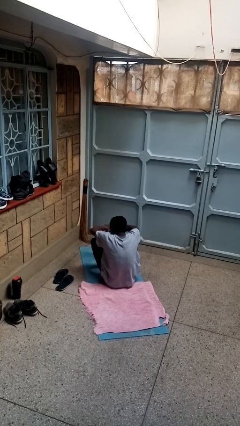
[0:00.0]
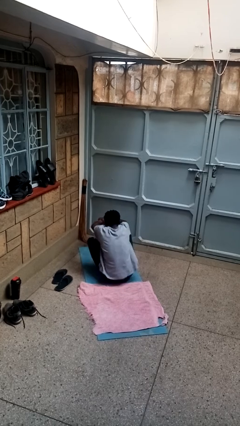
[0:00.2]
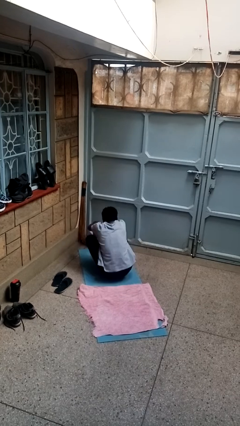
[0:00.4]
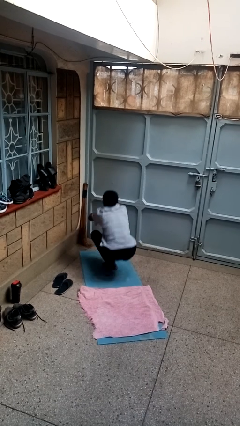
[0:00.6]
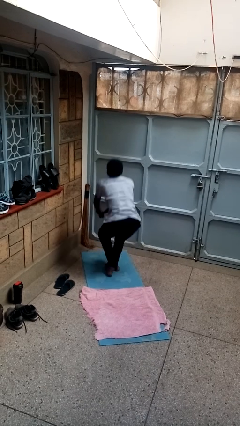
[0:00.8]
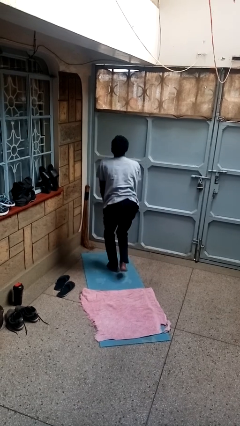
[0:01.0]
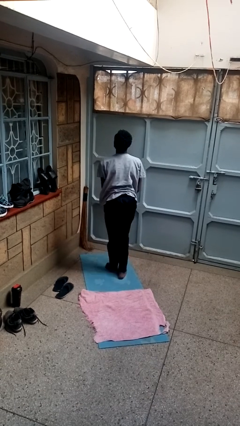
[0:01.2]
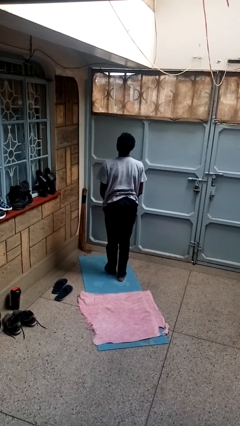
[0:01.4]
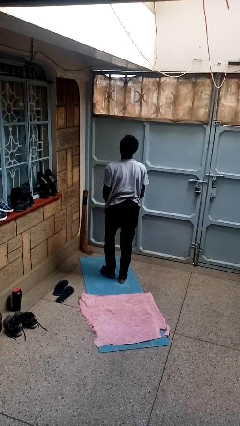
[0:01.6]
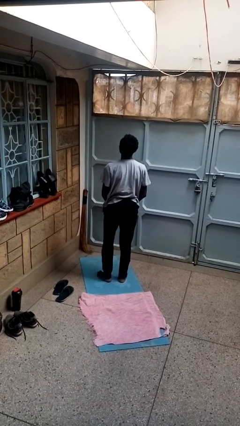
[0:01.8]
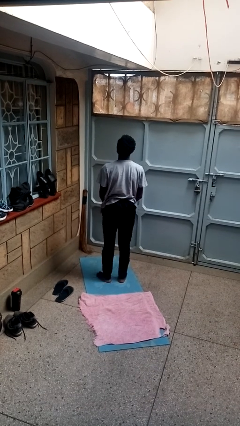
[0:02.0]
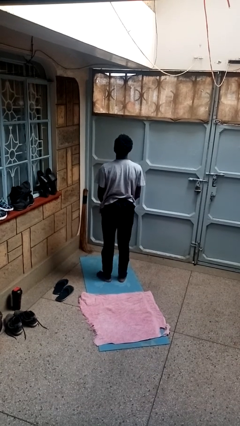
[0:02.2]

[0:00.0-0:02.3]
person stands up from floor

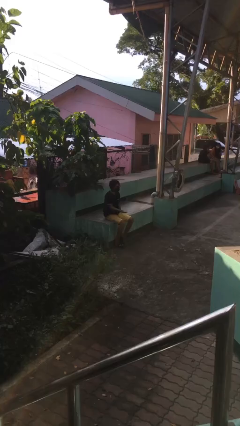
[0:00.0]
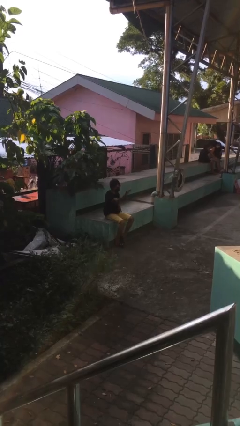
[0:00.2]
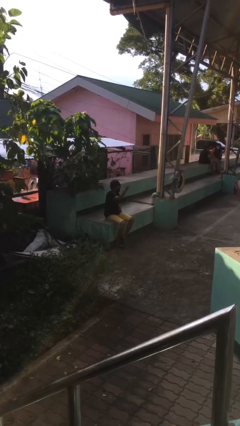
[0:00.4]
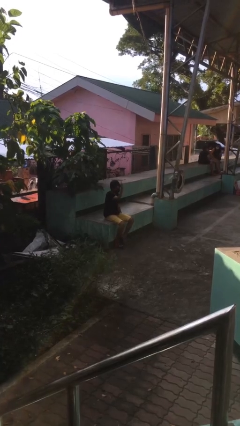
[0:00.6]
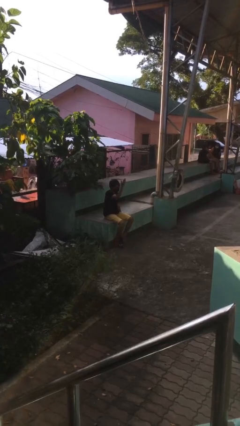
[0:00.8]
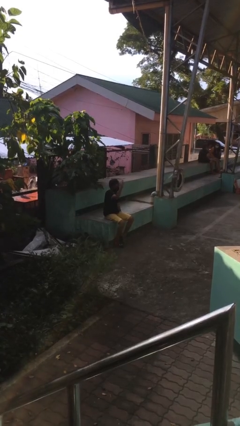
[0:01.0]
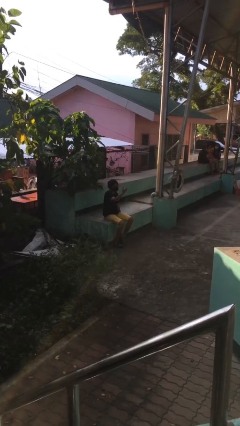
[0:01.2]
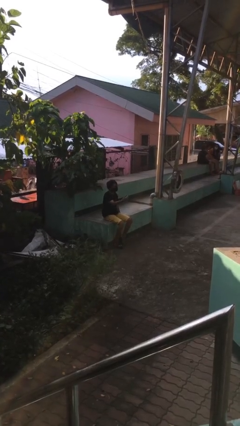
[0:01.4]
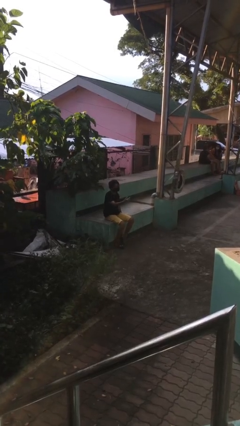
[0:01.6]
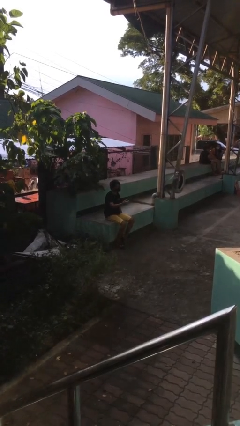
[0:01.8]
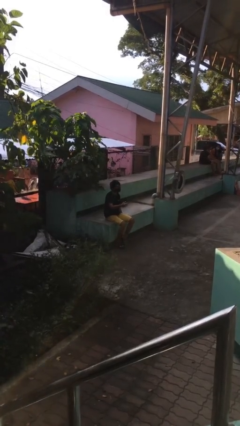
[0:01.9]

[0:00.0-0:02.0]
person gestures come here

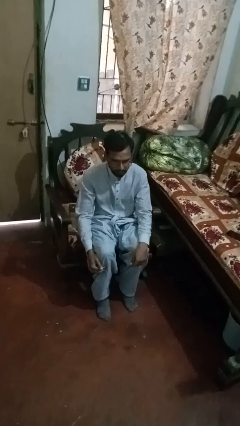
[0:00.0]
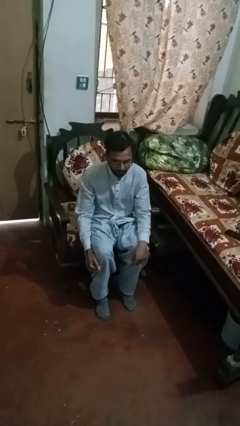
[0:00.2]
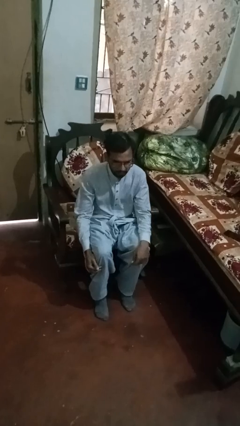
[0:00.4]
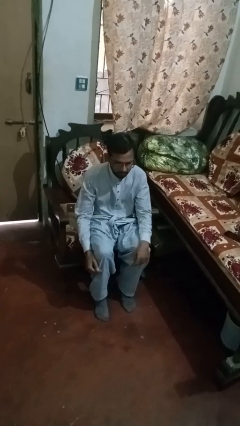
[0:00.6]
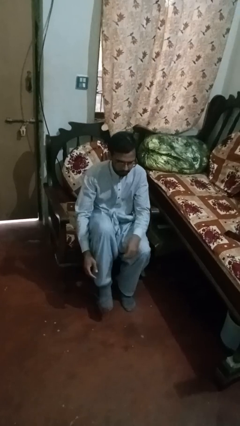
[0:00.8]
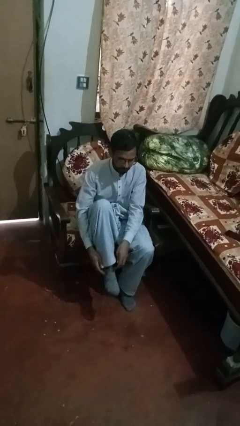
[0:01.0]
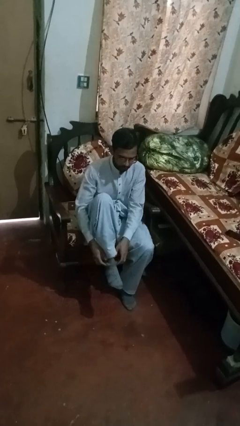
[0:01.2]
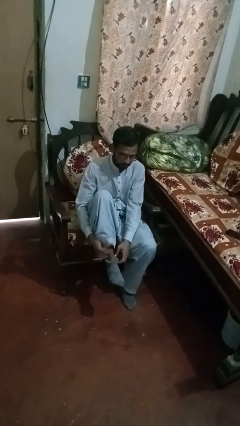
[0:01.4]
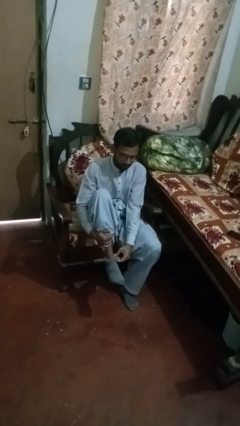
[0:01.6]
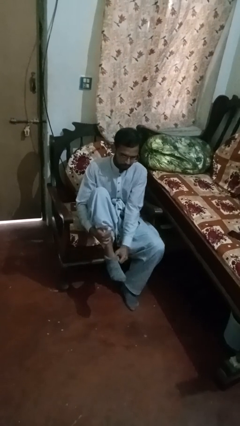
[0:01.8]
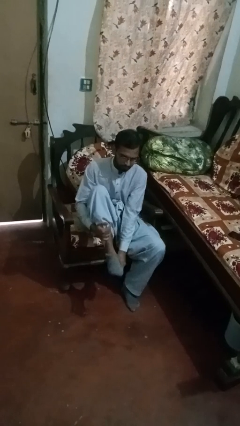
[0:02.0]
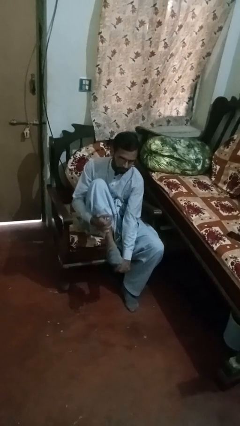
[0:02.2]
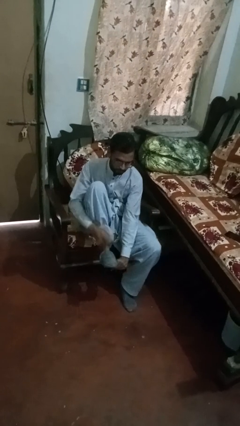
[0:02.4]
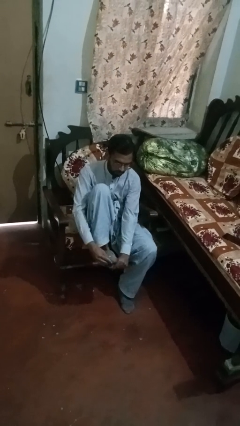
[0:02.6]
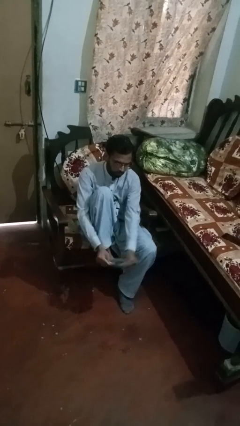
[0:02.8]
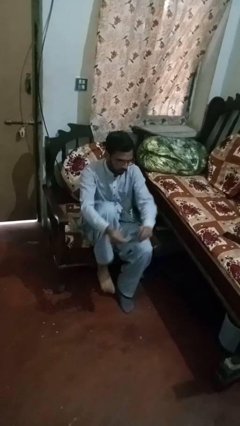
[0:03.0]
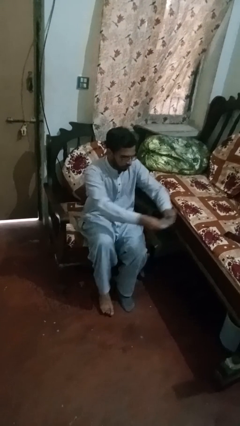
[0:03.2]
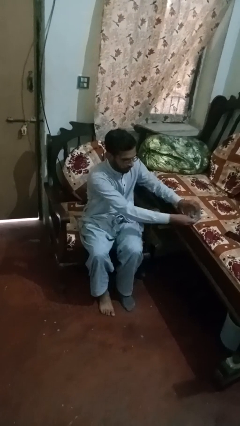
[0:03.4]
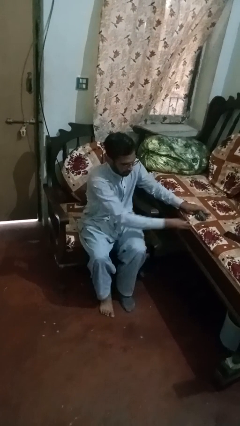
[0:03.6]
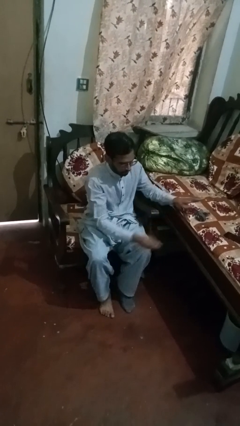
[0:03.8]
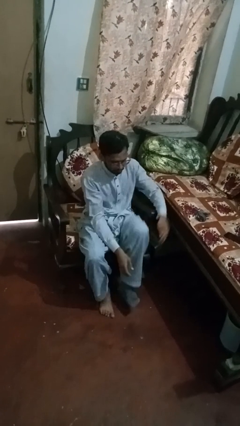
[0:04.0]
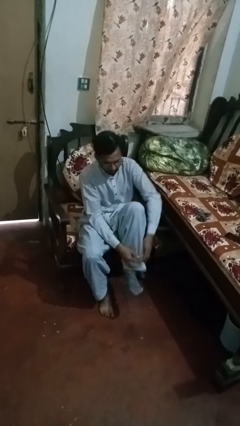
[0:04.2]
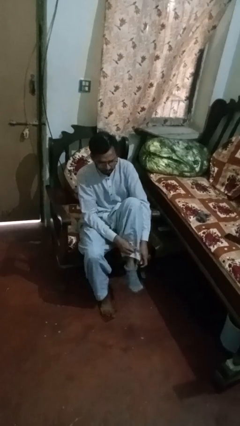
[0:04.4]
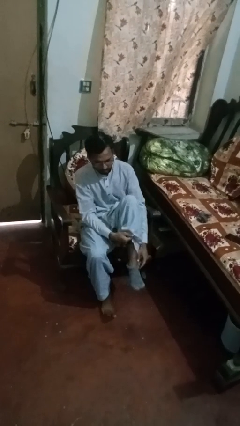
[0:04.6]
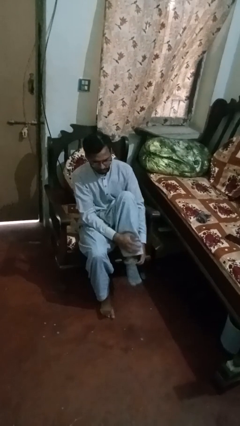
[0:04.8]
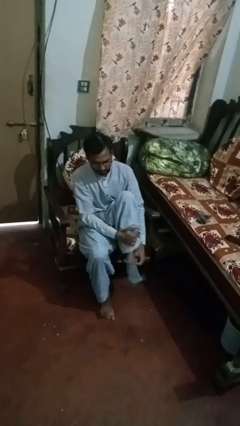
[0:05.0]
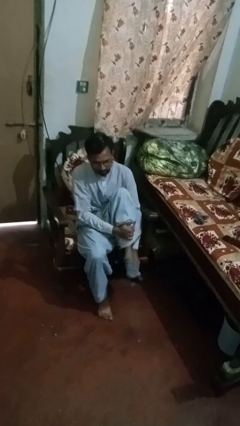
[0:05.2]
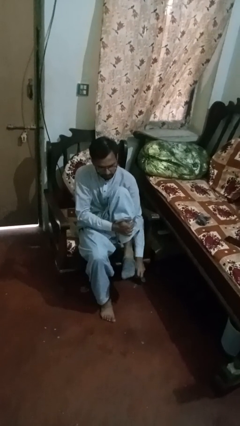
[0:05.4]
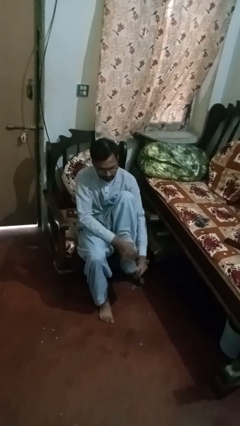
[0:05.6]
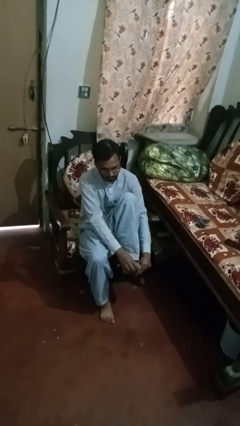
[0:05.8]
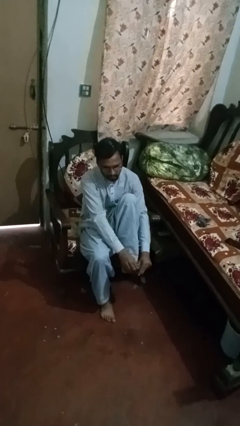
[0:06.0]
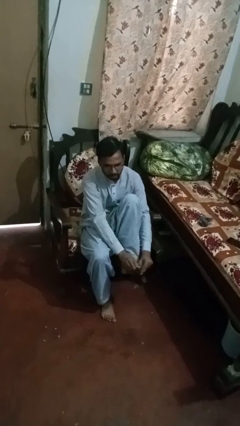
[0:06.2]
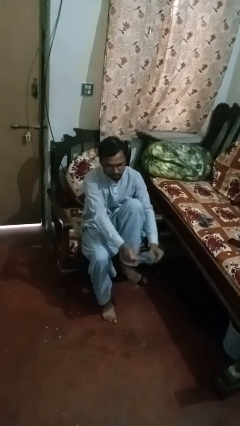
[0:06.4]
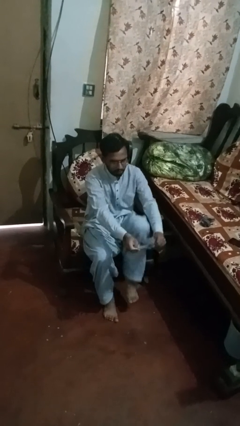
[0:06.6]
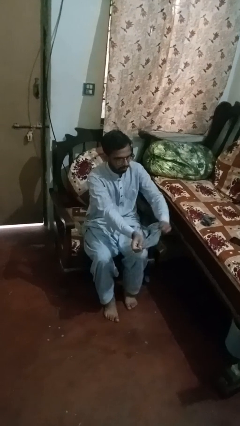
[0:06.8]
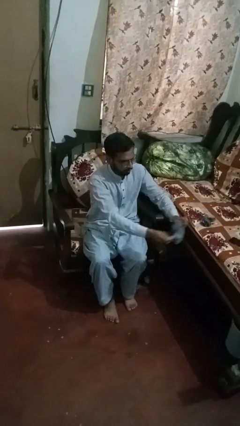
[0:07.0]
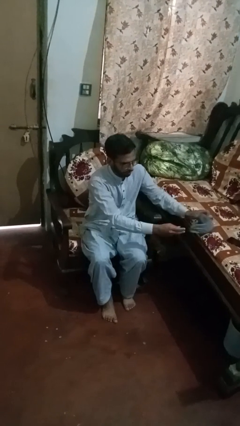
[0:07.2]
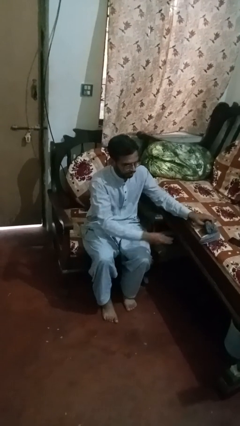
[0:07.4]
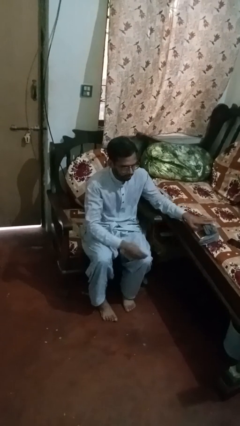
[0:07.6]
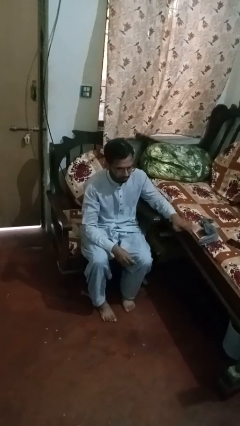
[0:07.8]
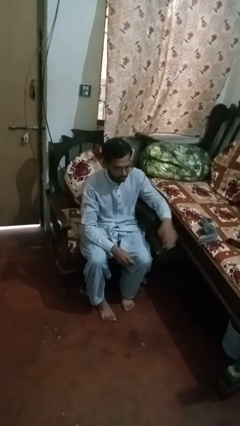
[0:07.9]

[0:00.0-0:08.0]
person takes off socks

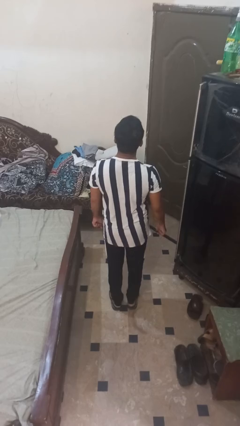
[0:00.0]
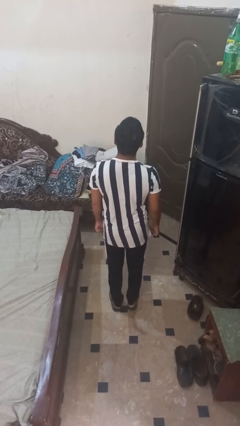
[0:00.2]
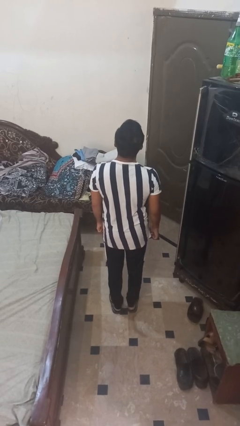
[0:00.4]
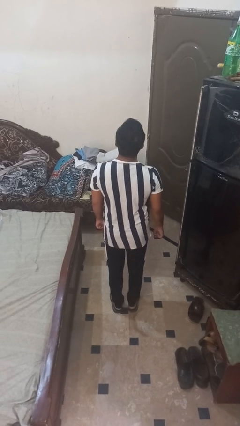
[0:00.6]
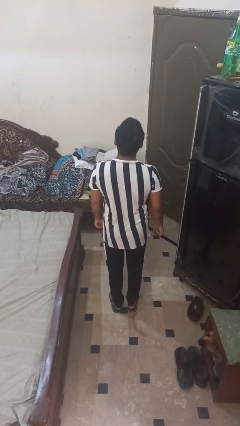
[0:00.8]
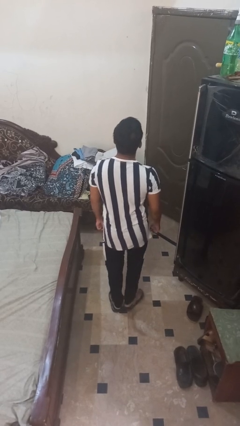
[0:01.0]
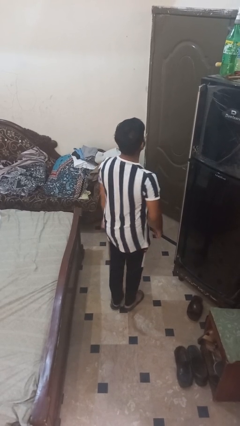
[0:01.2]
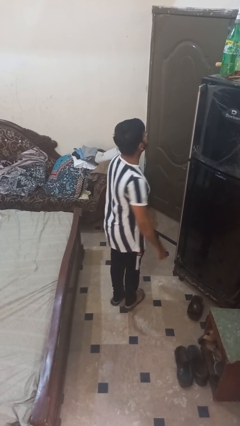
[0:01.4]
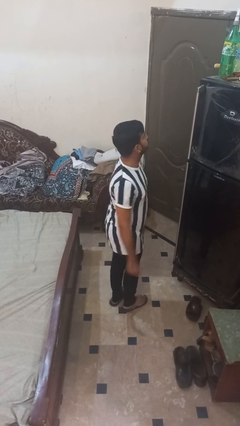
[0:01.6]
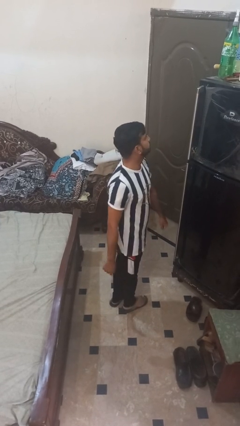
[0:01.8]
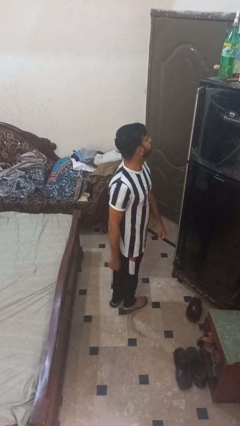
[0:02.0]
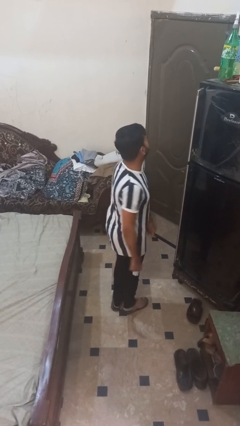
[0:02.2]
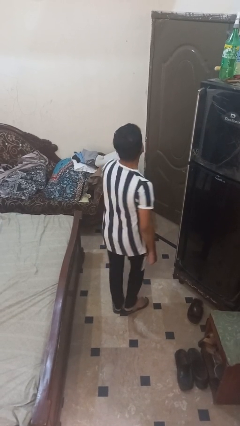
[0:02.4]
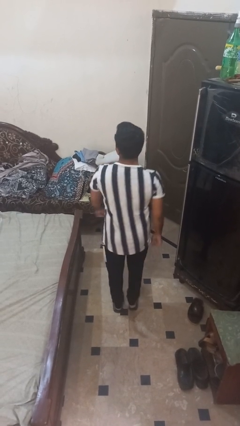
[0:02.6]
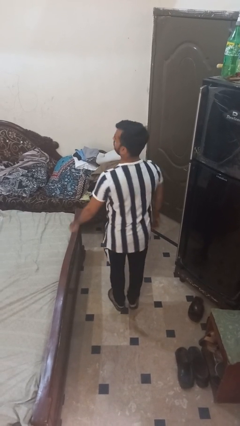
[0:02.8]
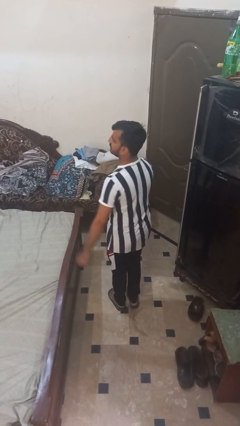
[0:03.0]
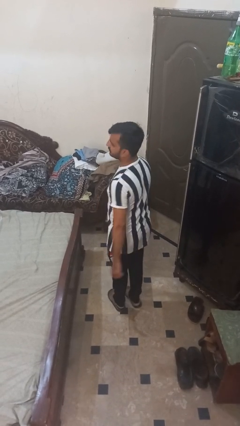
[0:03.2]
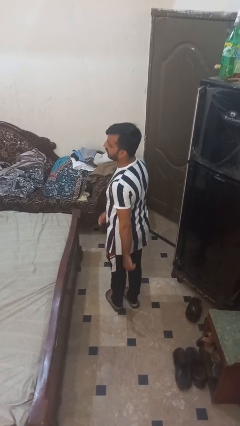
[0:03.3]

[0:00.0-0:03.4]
person twirls

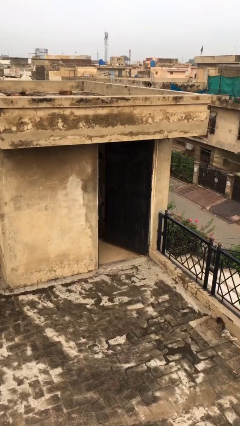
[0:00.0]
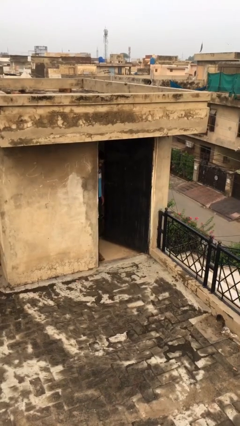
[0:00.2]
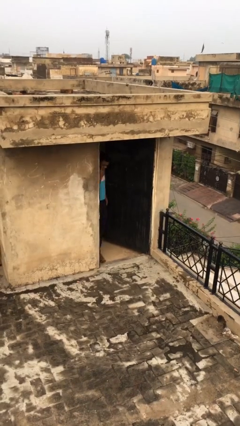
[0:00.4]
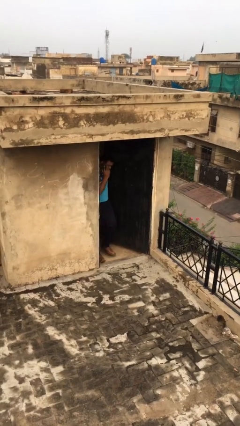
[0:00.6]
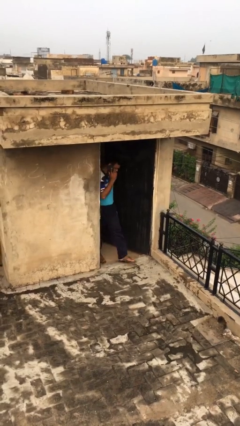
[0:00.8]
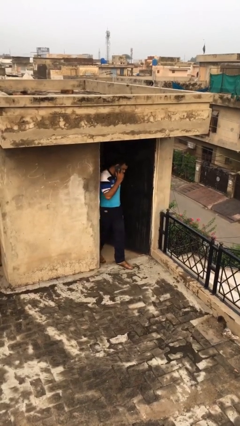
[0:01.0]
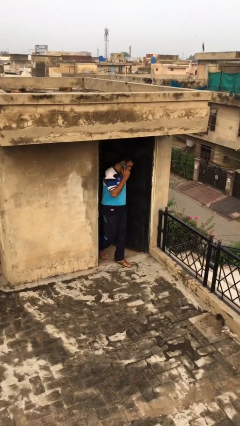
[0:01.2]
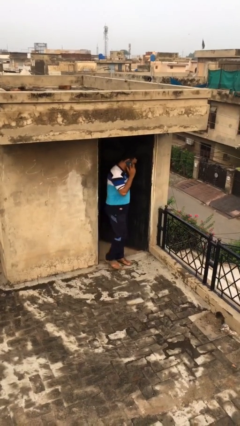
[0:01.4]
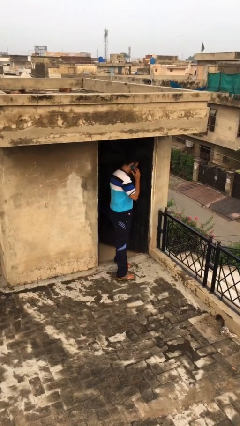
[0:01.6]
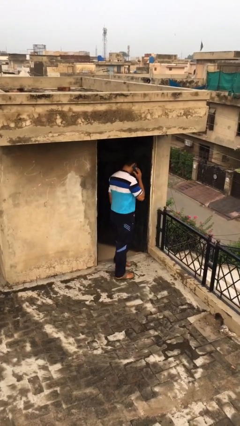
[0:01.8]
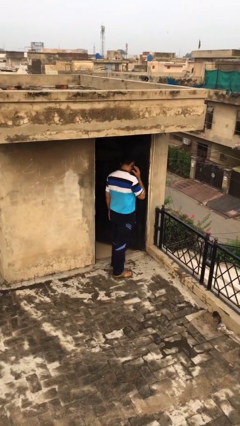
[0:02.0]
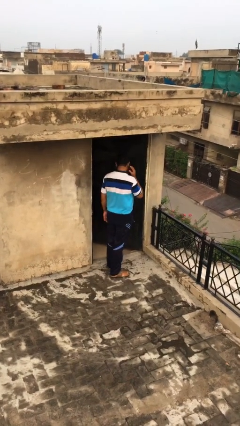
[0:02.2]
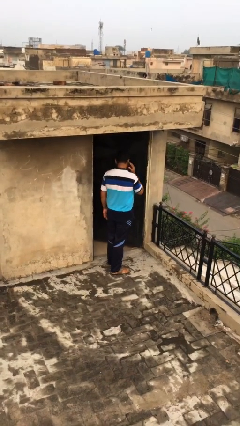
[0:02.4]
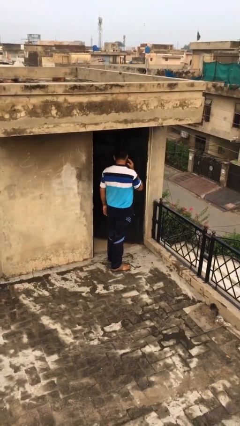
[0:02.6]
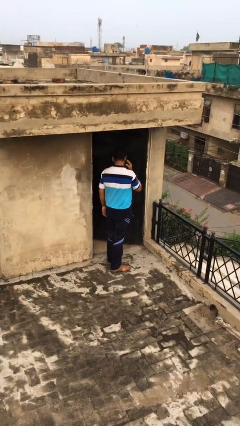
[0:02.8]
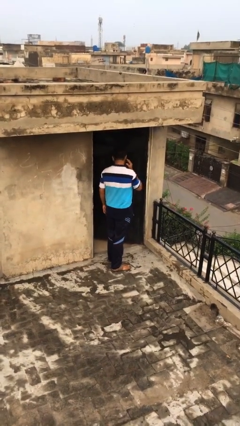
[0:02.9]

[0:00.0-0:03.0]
person enters scene through structure
